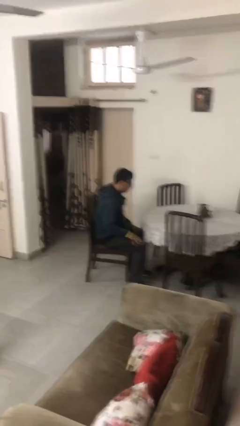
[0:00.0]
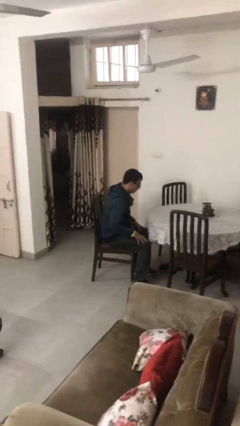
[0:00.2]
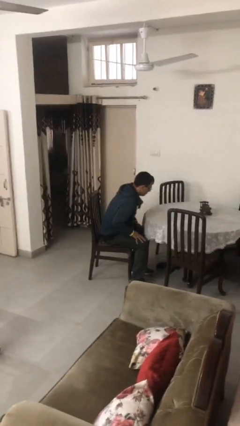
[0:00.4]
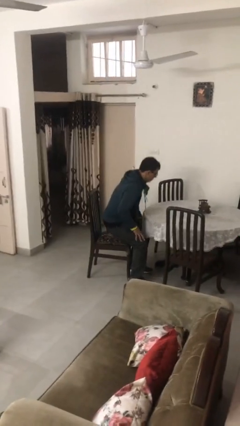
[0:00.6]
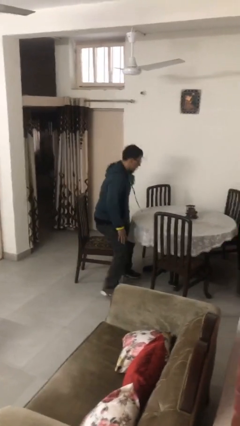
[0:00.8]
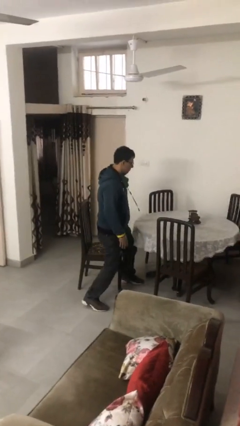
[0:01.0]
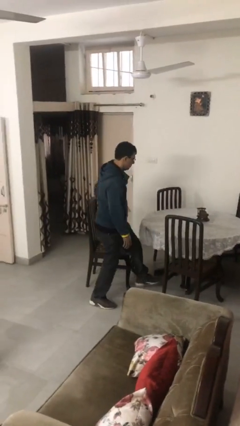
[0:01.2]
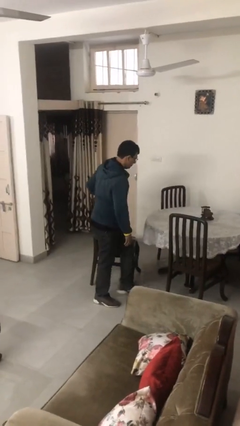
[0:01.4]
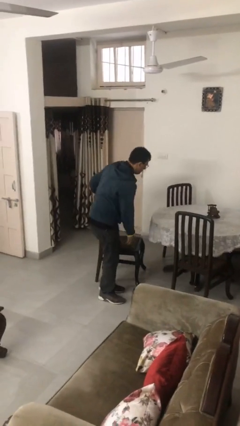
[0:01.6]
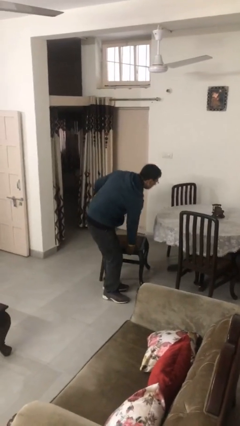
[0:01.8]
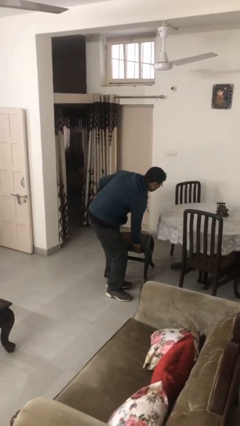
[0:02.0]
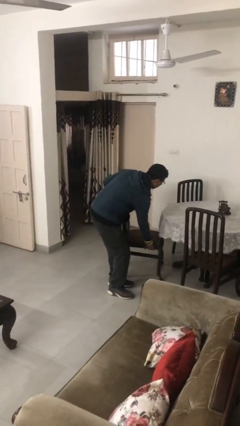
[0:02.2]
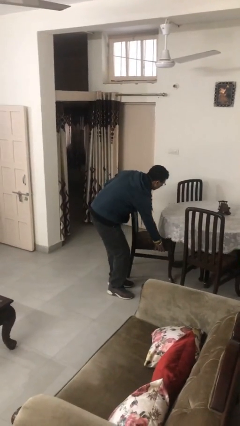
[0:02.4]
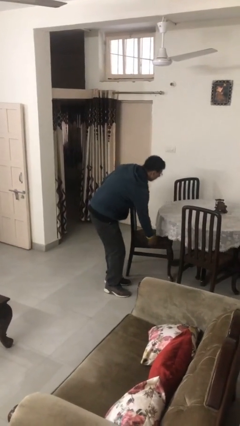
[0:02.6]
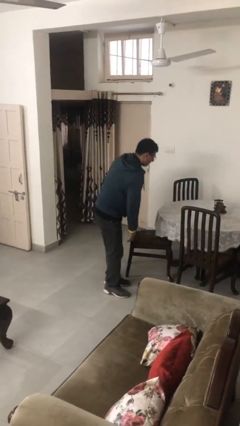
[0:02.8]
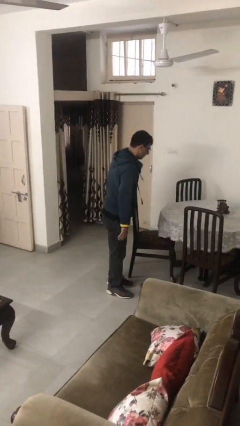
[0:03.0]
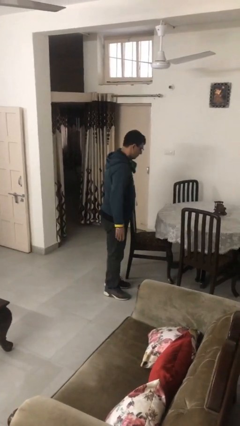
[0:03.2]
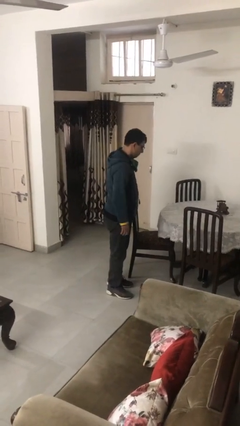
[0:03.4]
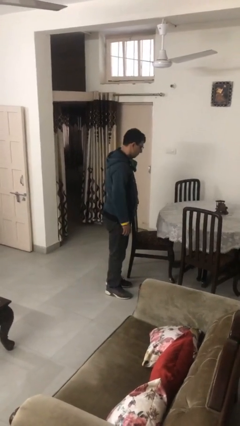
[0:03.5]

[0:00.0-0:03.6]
person stands up

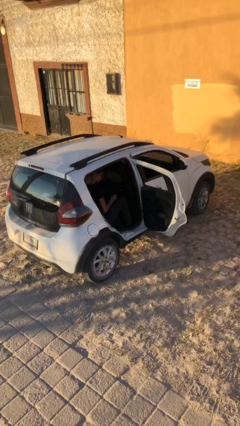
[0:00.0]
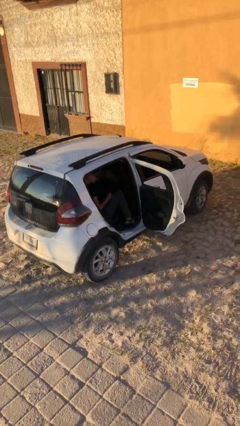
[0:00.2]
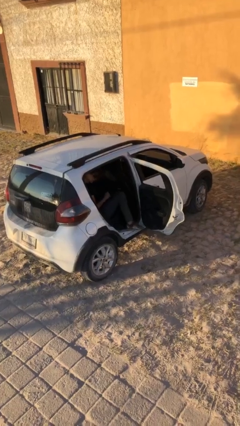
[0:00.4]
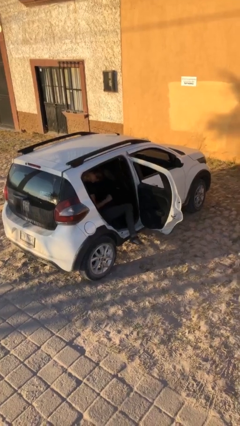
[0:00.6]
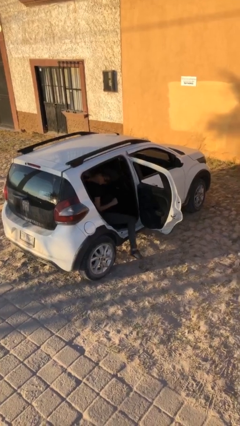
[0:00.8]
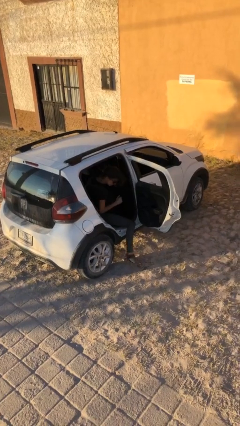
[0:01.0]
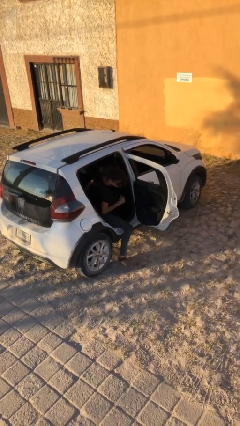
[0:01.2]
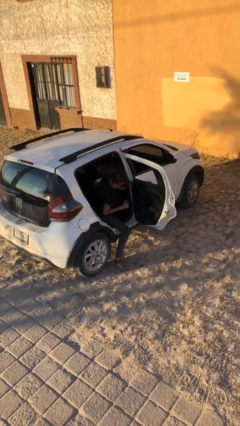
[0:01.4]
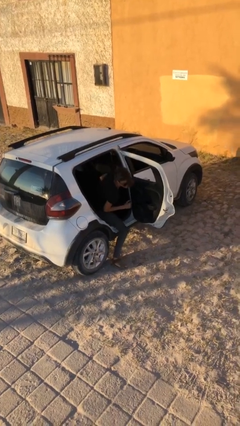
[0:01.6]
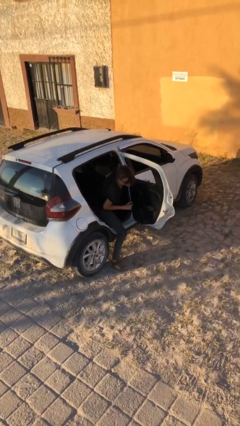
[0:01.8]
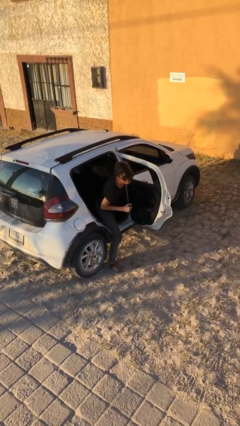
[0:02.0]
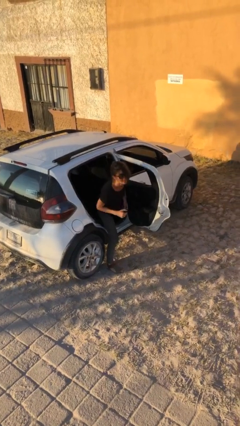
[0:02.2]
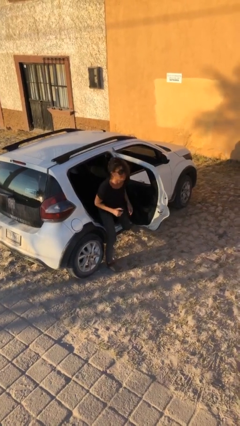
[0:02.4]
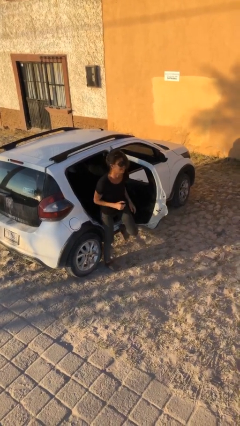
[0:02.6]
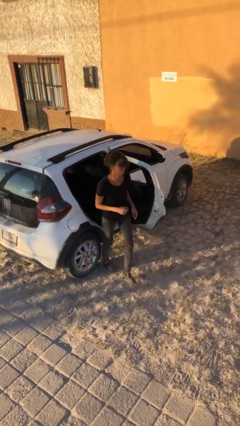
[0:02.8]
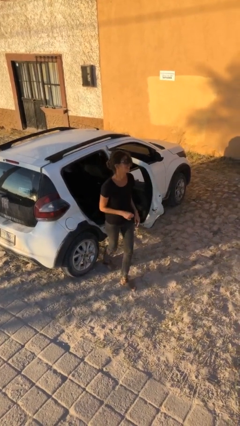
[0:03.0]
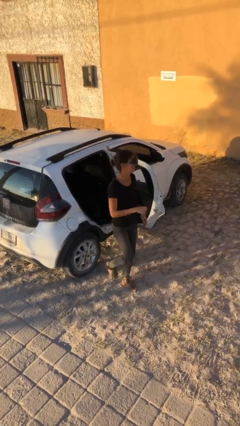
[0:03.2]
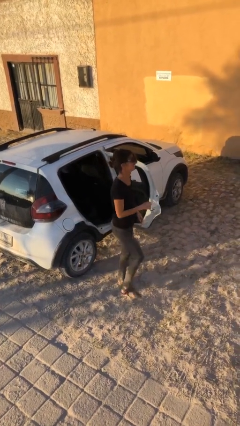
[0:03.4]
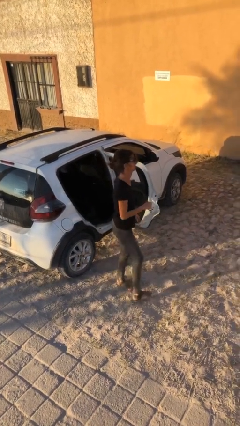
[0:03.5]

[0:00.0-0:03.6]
person exits car

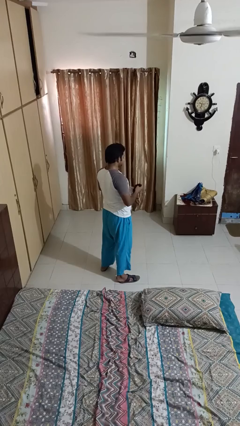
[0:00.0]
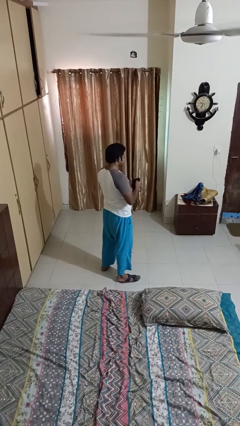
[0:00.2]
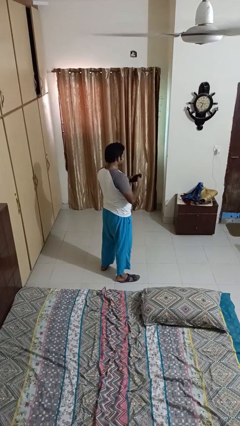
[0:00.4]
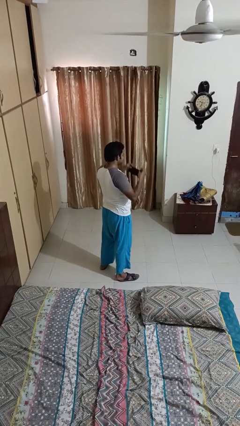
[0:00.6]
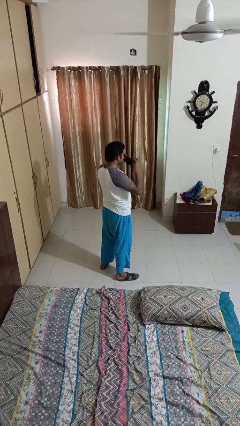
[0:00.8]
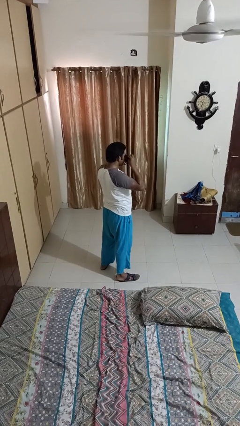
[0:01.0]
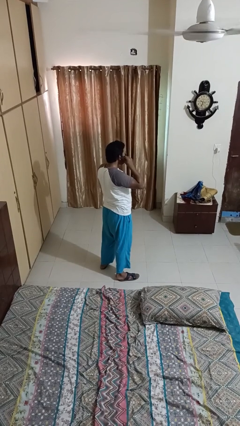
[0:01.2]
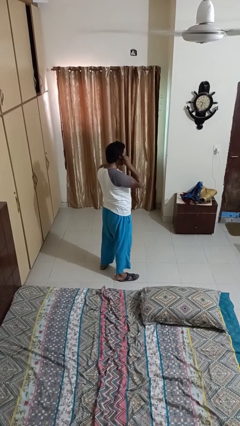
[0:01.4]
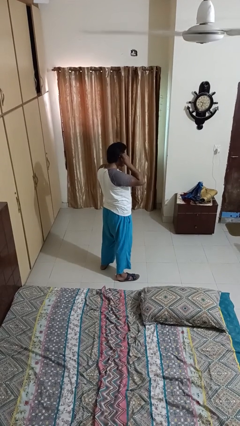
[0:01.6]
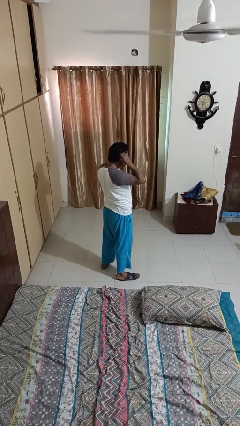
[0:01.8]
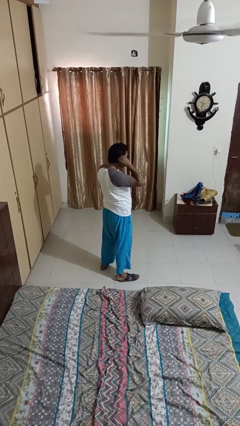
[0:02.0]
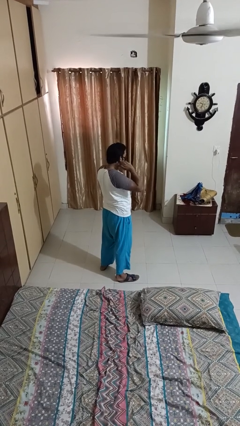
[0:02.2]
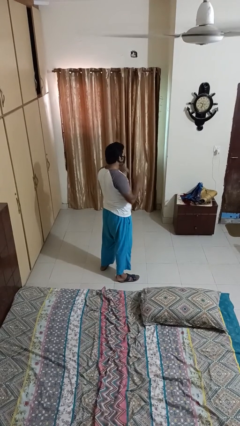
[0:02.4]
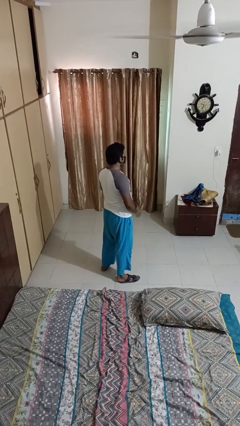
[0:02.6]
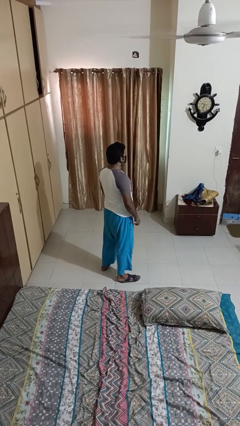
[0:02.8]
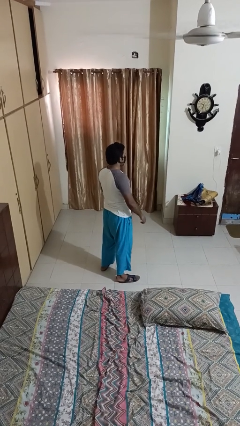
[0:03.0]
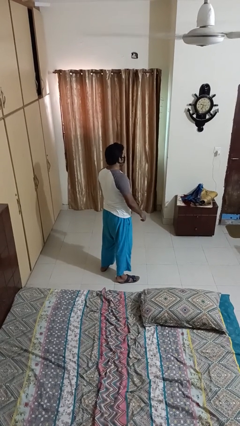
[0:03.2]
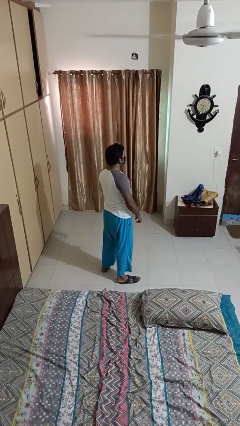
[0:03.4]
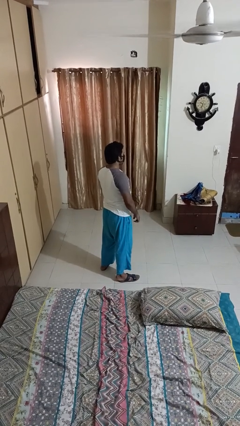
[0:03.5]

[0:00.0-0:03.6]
person puts on facemask

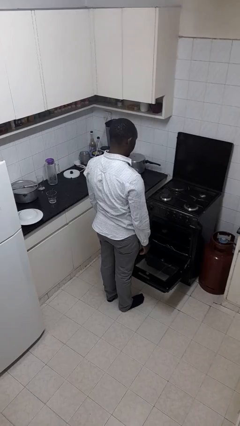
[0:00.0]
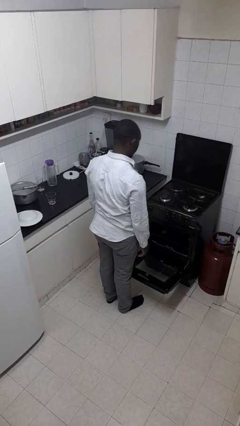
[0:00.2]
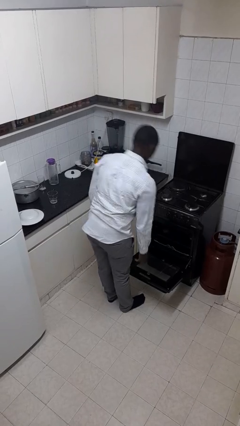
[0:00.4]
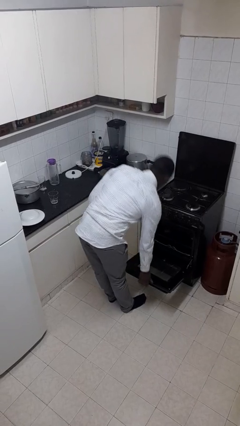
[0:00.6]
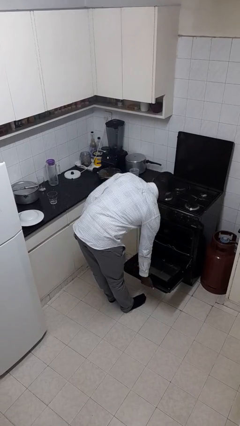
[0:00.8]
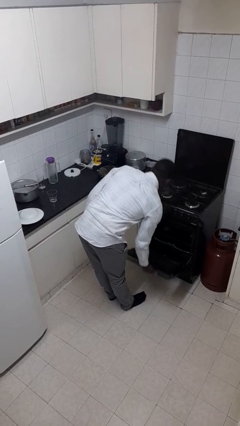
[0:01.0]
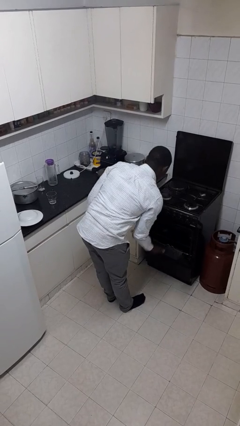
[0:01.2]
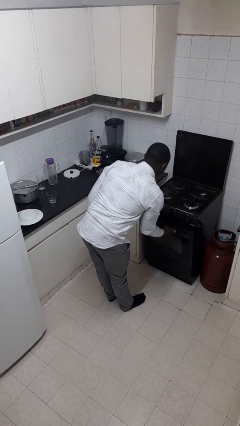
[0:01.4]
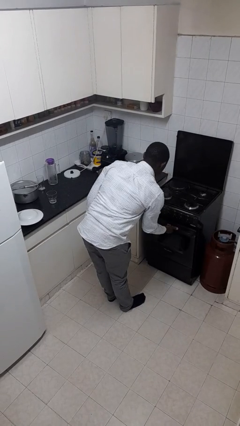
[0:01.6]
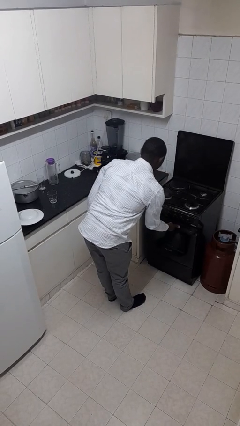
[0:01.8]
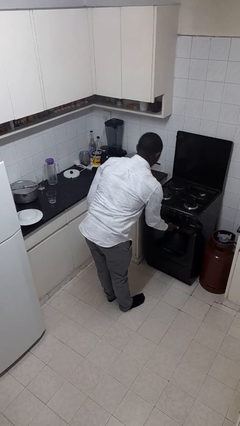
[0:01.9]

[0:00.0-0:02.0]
person closes oven door

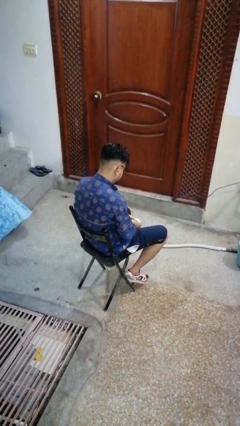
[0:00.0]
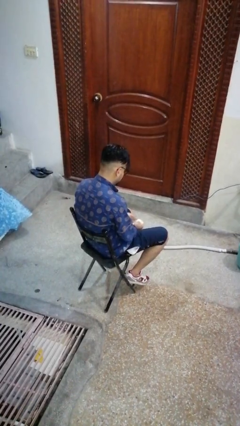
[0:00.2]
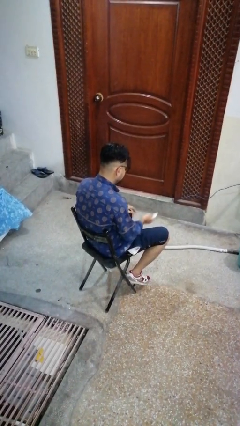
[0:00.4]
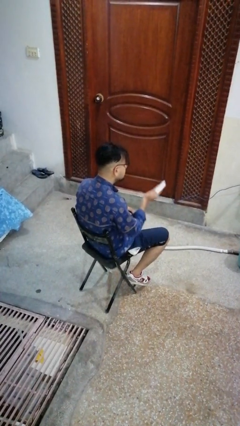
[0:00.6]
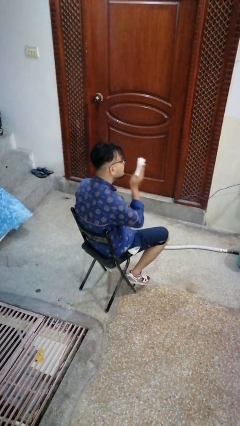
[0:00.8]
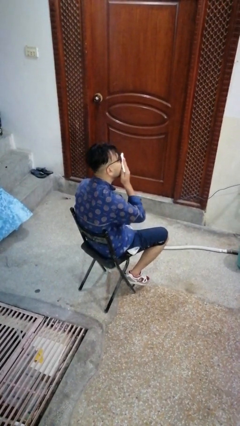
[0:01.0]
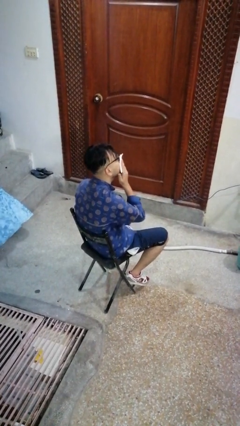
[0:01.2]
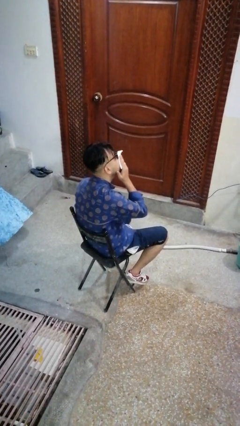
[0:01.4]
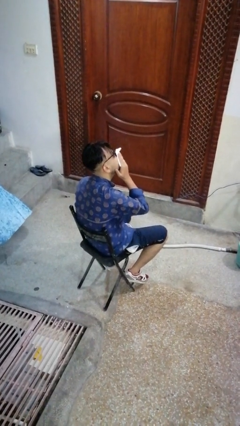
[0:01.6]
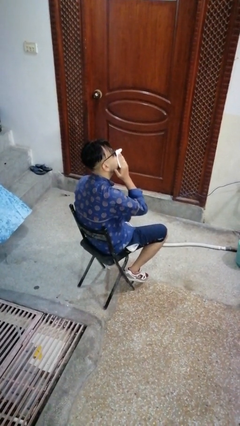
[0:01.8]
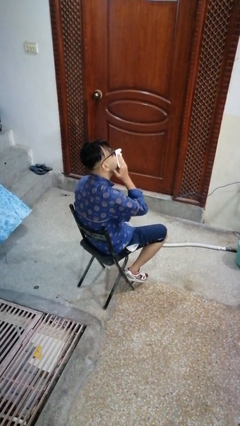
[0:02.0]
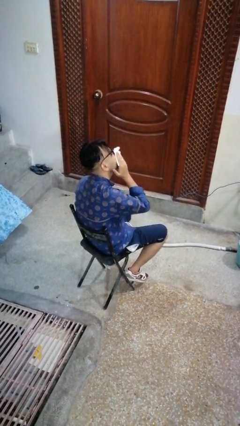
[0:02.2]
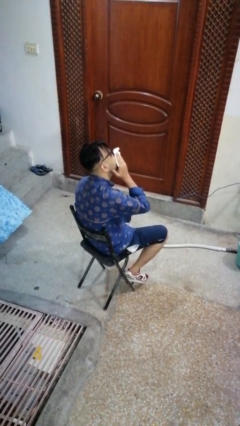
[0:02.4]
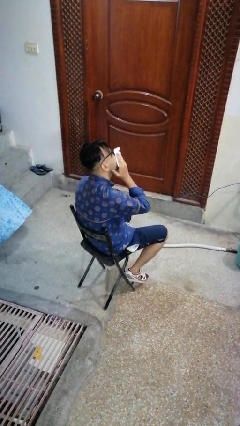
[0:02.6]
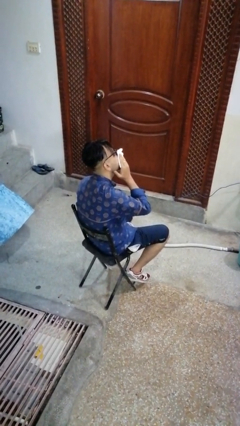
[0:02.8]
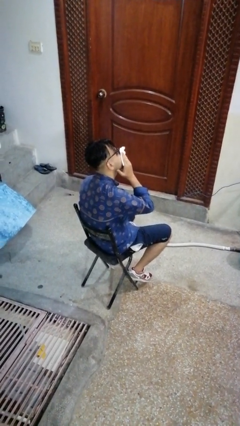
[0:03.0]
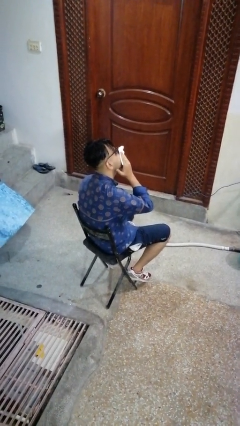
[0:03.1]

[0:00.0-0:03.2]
person blows nose

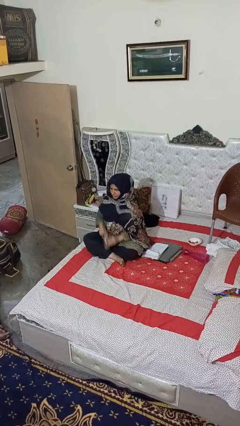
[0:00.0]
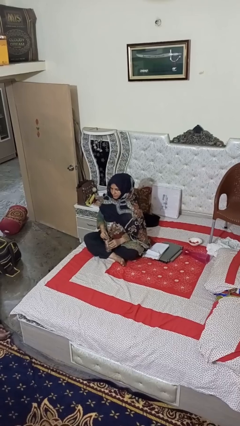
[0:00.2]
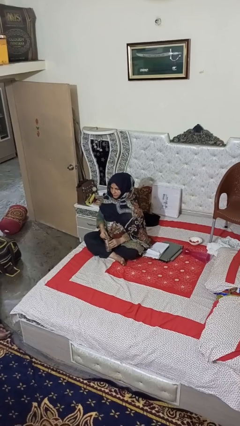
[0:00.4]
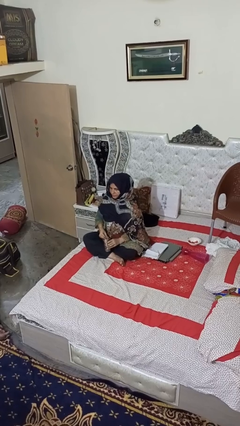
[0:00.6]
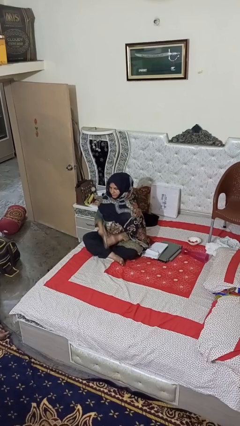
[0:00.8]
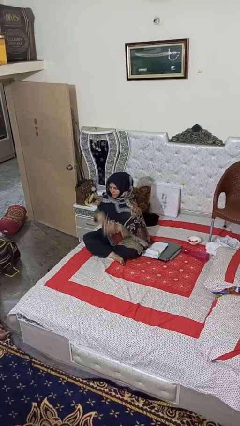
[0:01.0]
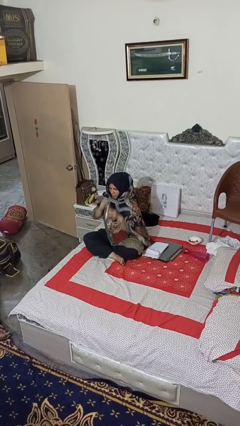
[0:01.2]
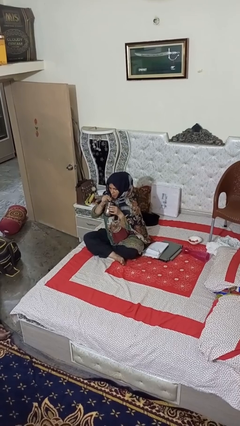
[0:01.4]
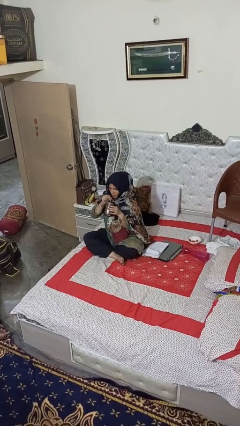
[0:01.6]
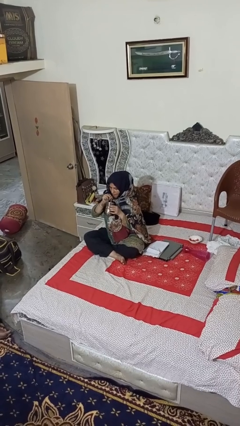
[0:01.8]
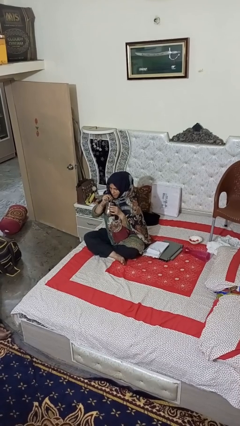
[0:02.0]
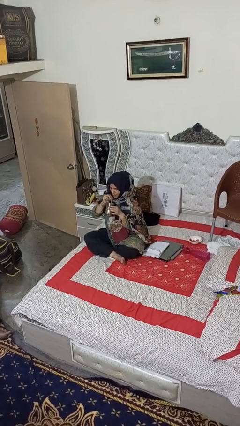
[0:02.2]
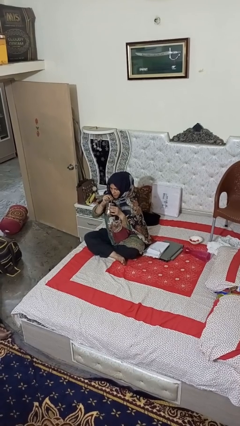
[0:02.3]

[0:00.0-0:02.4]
person drinks from straw
